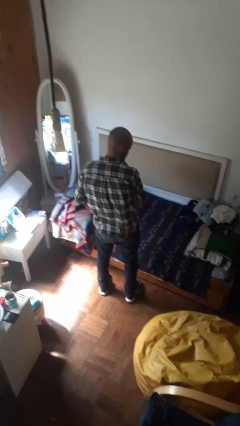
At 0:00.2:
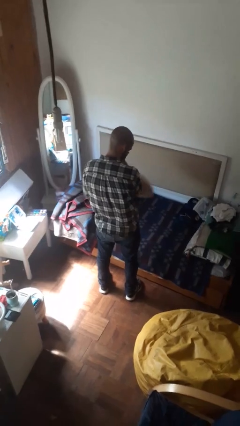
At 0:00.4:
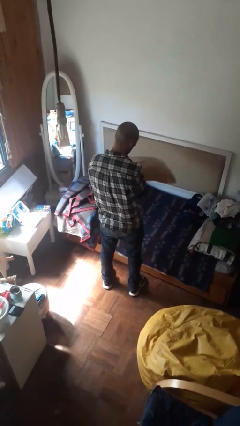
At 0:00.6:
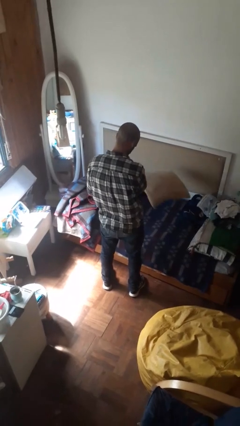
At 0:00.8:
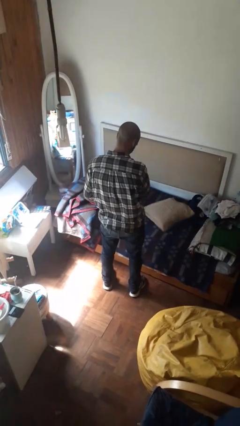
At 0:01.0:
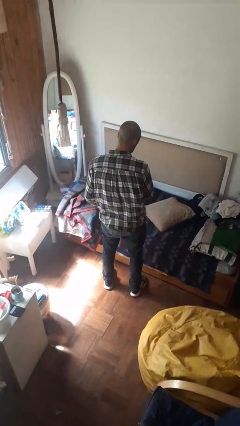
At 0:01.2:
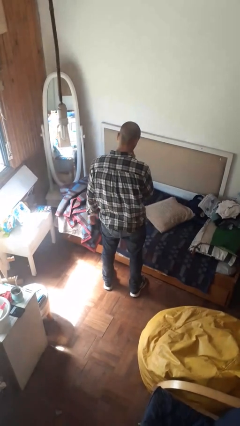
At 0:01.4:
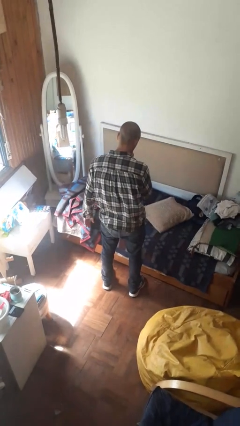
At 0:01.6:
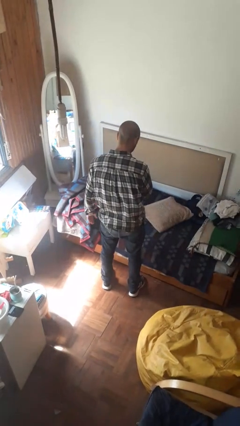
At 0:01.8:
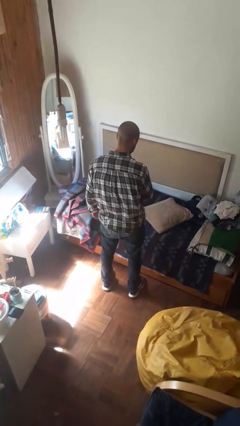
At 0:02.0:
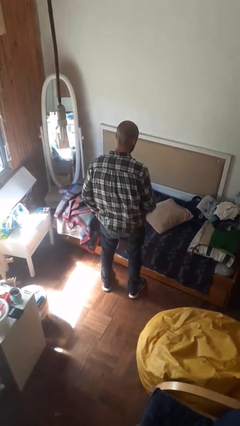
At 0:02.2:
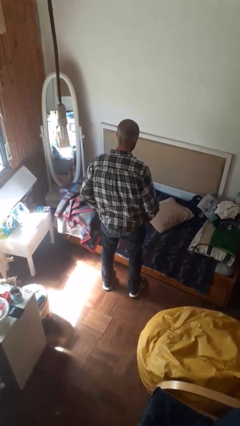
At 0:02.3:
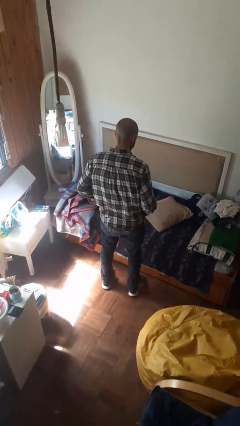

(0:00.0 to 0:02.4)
person puts down object on bed

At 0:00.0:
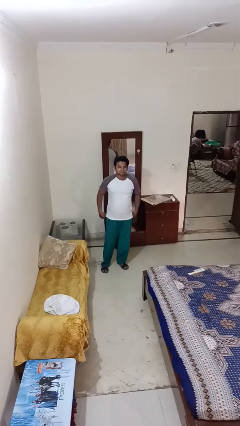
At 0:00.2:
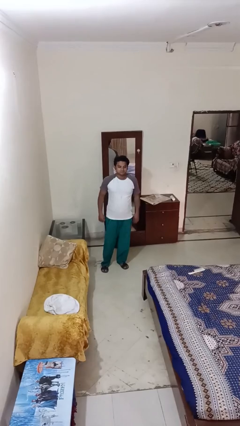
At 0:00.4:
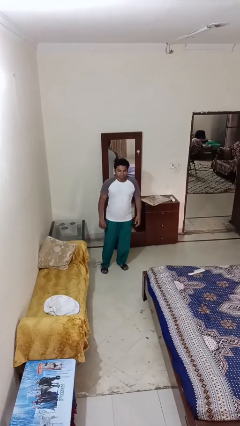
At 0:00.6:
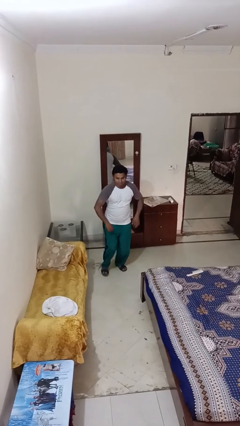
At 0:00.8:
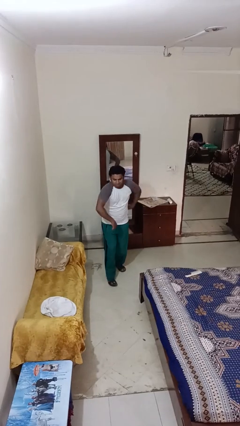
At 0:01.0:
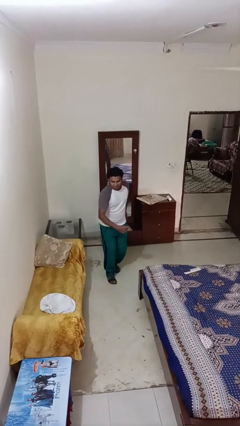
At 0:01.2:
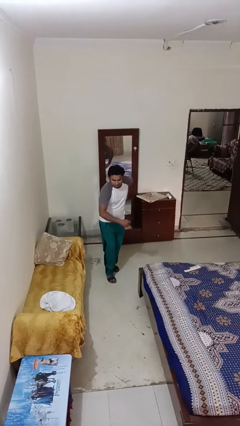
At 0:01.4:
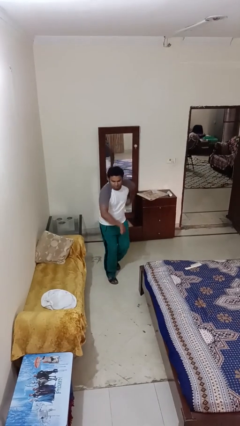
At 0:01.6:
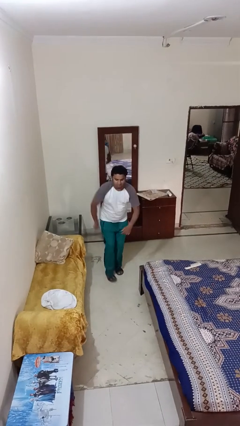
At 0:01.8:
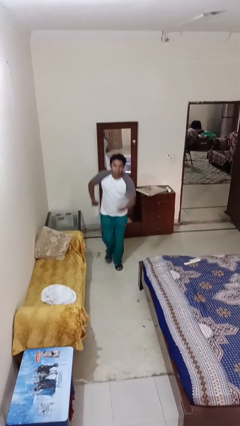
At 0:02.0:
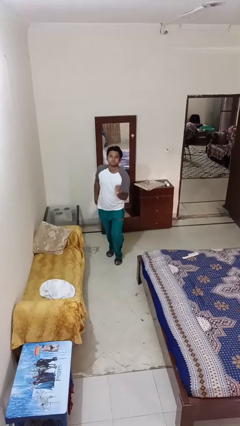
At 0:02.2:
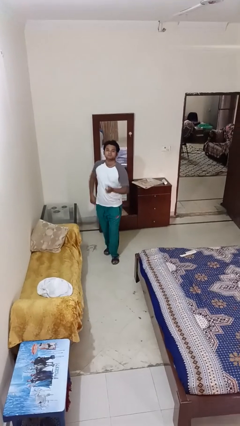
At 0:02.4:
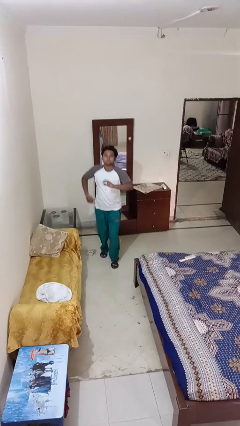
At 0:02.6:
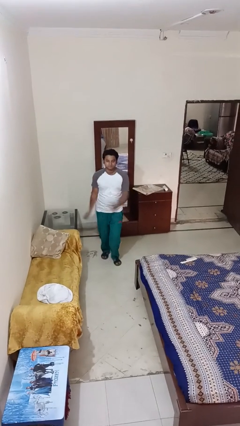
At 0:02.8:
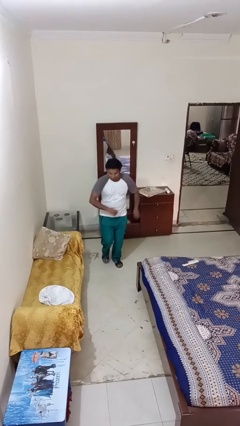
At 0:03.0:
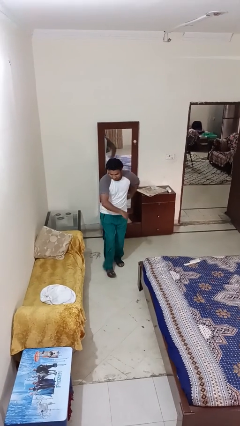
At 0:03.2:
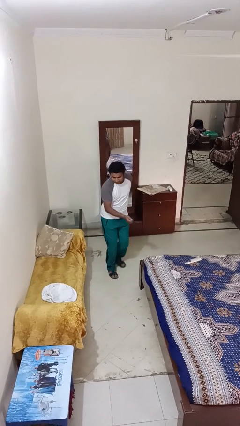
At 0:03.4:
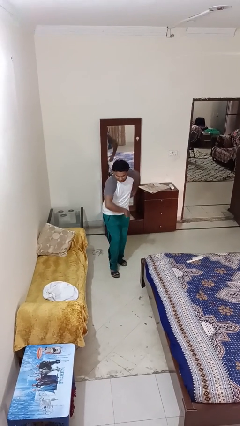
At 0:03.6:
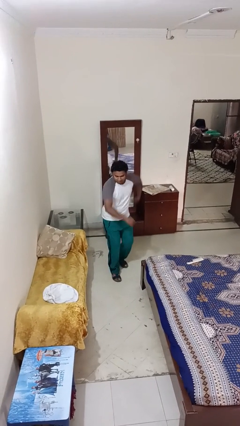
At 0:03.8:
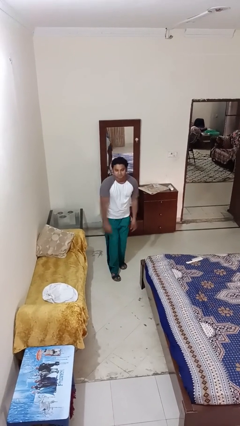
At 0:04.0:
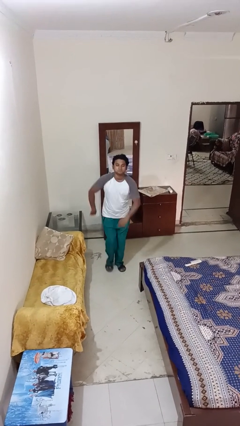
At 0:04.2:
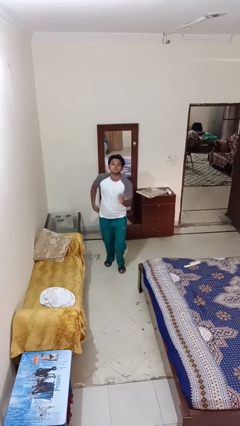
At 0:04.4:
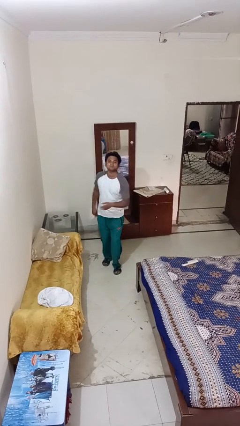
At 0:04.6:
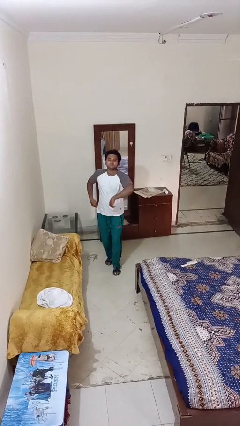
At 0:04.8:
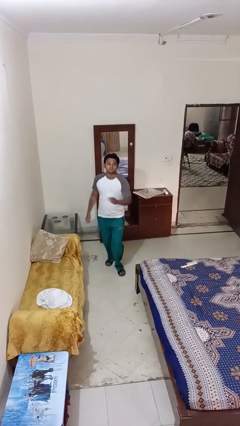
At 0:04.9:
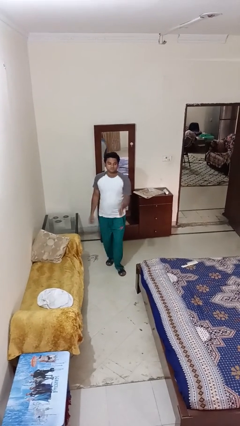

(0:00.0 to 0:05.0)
person dances in place

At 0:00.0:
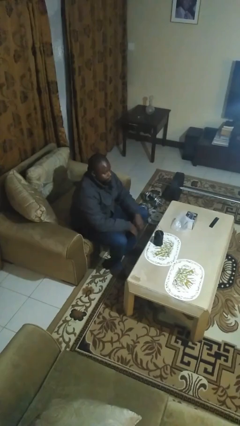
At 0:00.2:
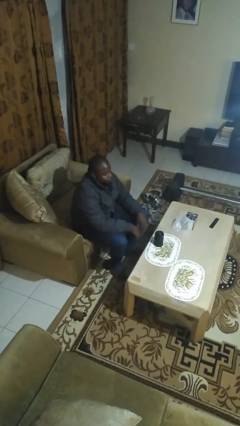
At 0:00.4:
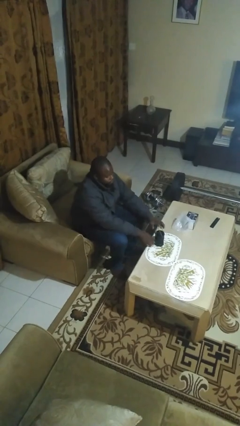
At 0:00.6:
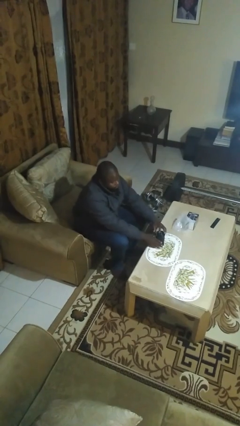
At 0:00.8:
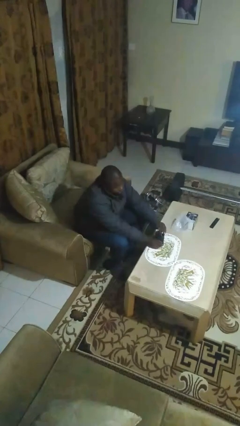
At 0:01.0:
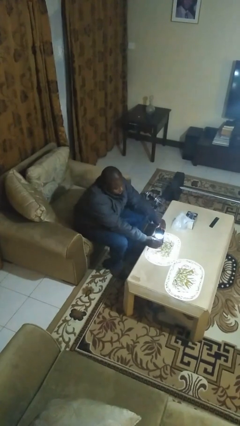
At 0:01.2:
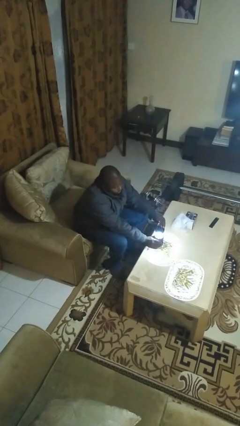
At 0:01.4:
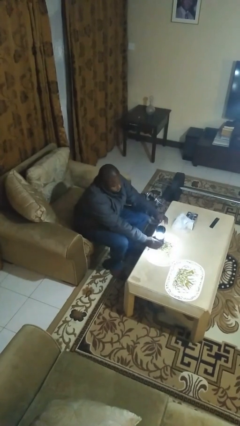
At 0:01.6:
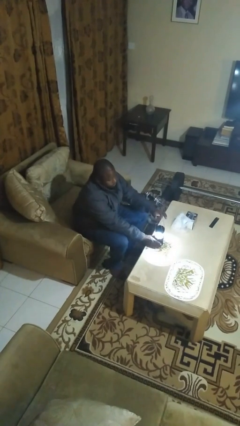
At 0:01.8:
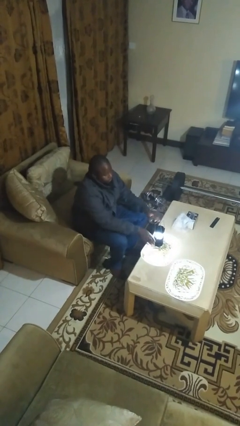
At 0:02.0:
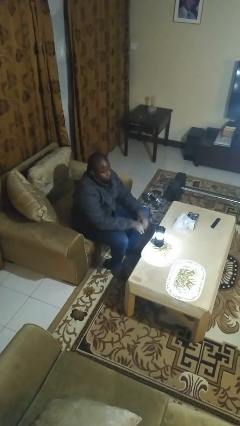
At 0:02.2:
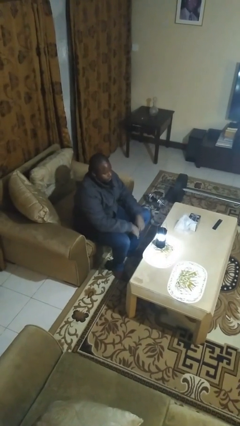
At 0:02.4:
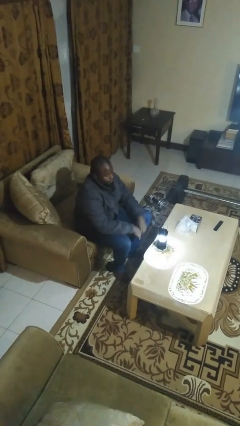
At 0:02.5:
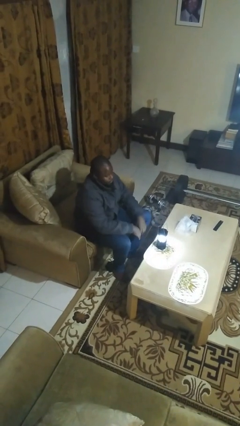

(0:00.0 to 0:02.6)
person turns on lamp

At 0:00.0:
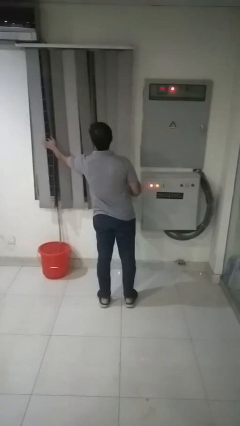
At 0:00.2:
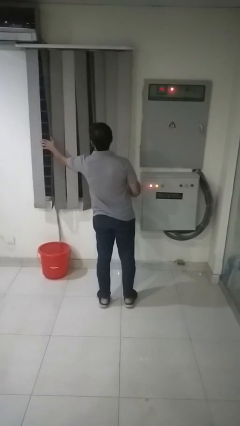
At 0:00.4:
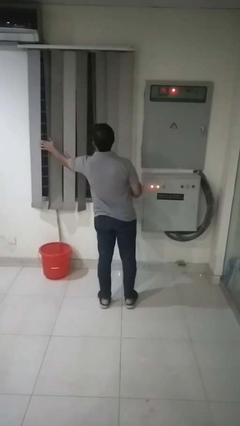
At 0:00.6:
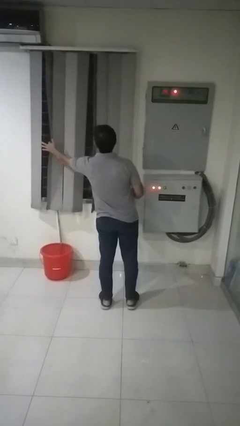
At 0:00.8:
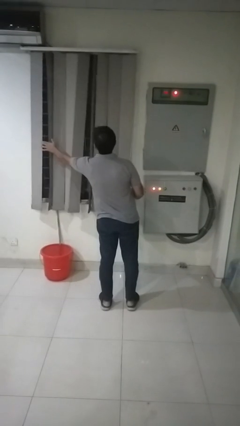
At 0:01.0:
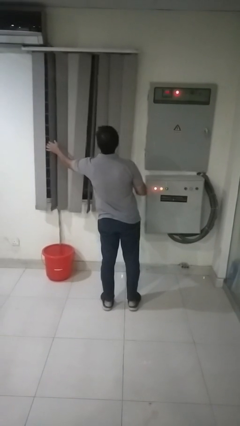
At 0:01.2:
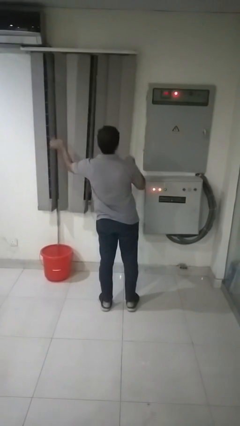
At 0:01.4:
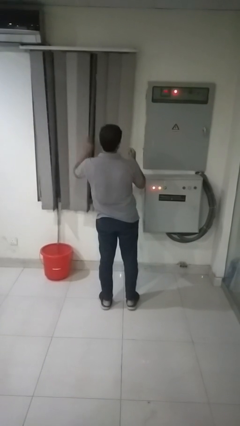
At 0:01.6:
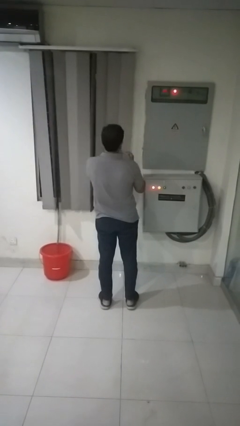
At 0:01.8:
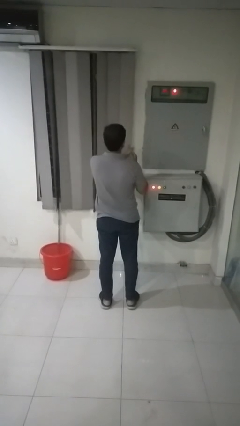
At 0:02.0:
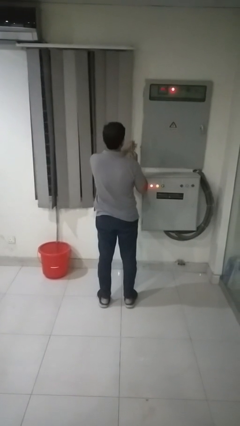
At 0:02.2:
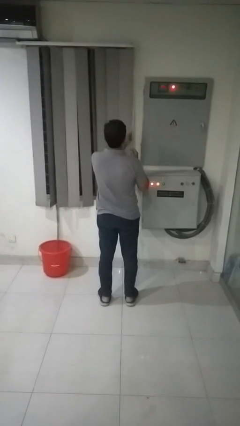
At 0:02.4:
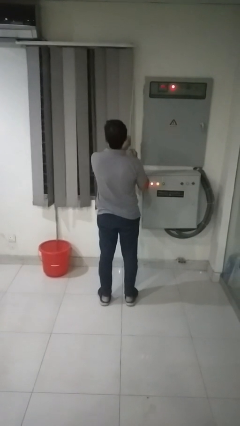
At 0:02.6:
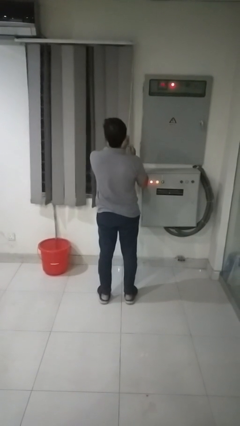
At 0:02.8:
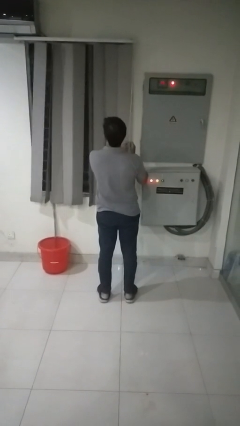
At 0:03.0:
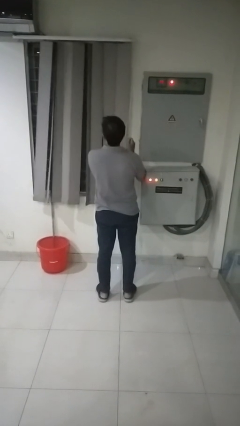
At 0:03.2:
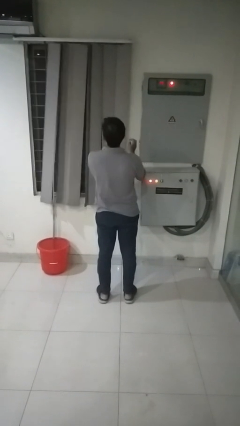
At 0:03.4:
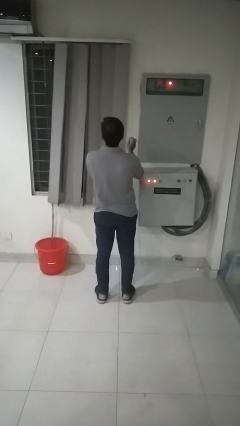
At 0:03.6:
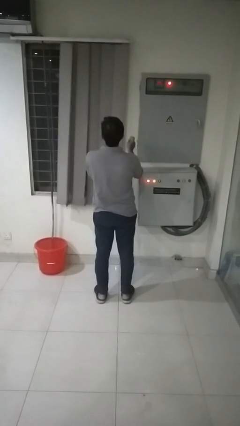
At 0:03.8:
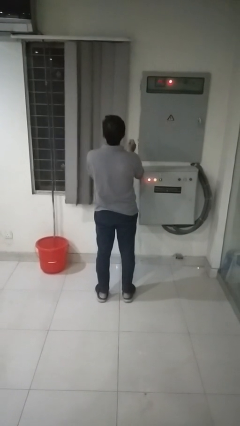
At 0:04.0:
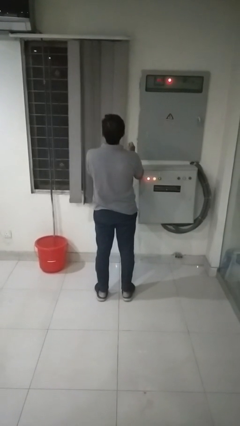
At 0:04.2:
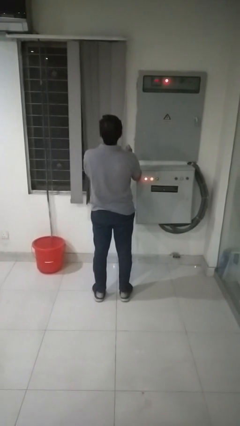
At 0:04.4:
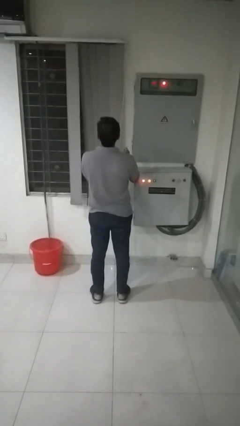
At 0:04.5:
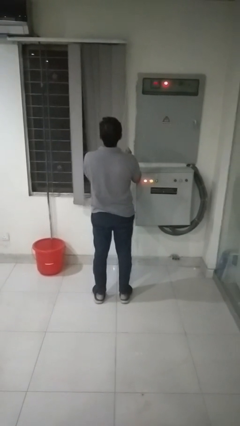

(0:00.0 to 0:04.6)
person opens curtains

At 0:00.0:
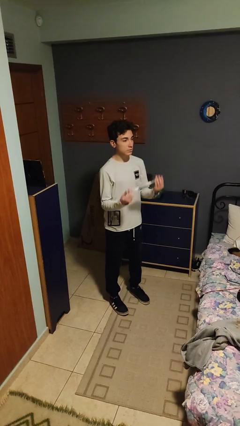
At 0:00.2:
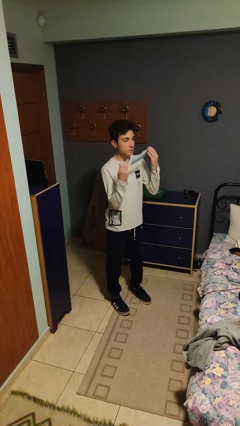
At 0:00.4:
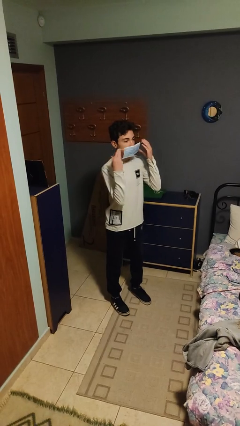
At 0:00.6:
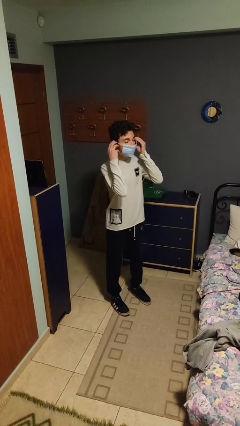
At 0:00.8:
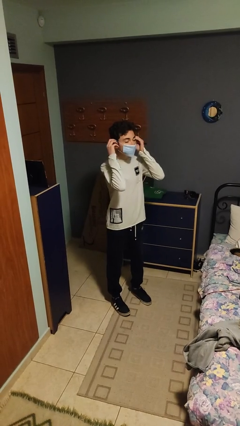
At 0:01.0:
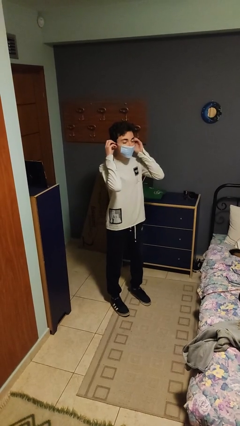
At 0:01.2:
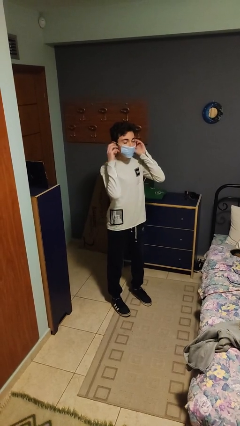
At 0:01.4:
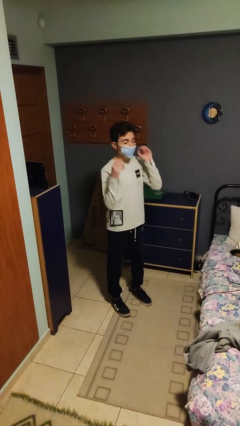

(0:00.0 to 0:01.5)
person puts on facemask

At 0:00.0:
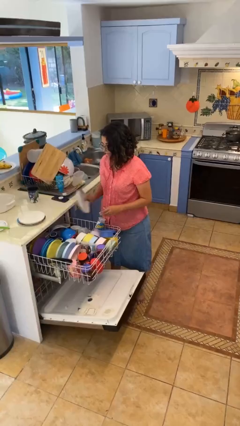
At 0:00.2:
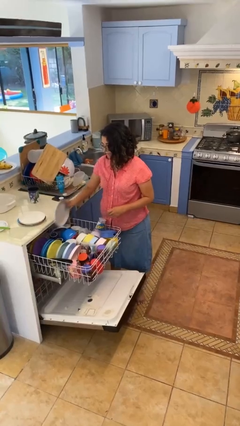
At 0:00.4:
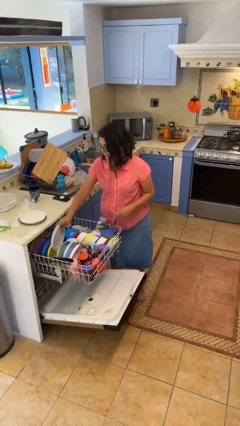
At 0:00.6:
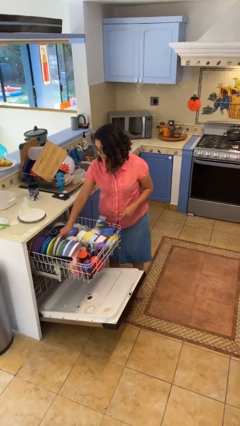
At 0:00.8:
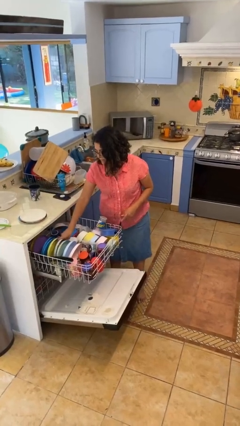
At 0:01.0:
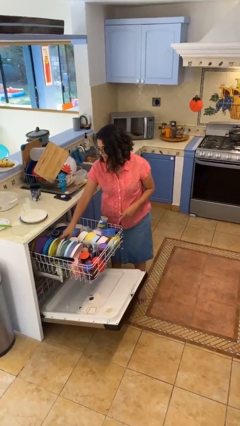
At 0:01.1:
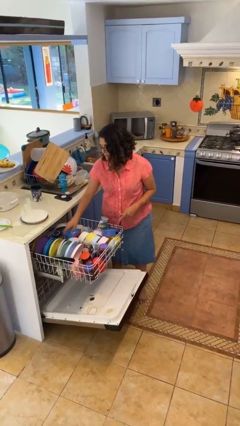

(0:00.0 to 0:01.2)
person loads dishwasher
